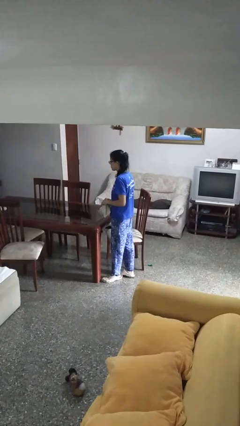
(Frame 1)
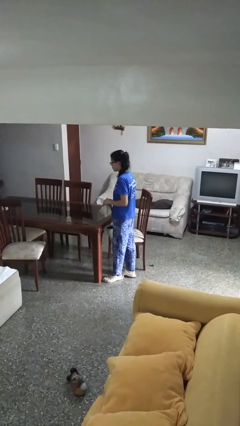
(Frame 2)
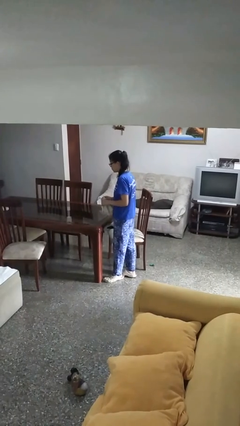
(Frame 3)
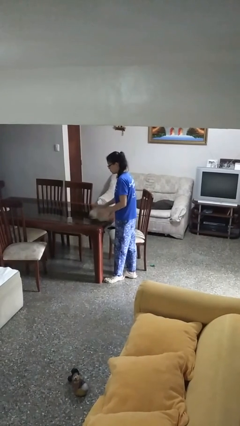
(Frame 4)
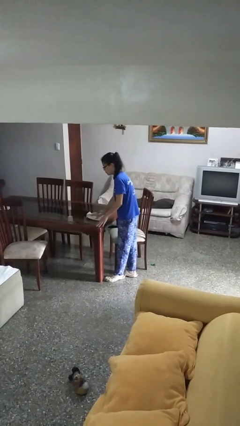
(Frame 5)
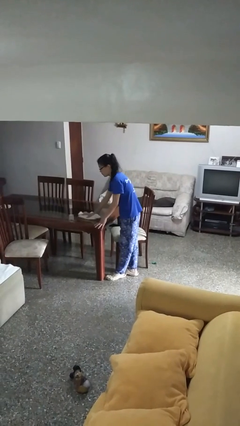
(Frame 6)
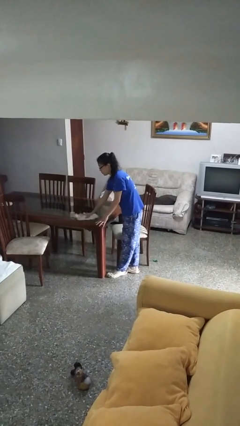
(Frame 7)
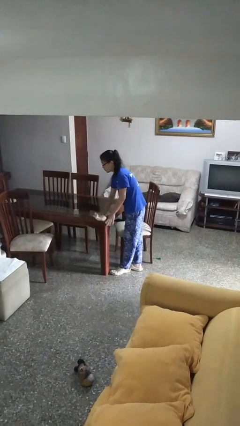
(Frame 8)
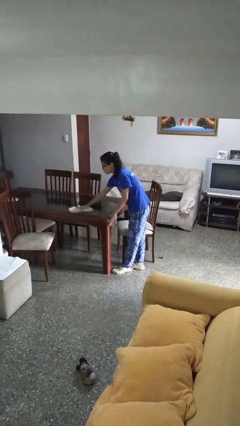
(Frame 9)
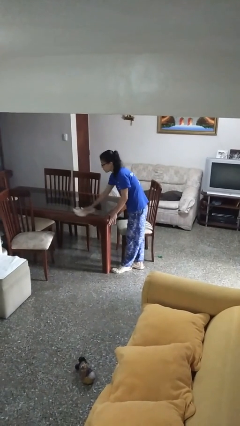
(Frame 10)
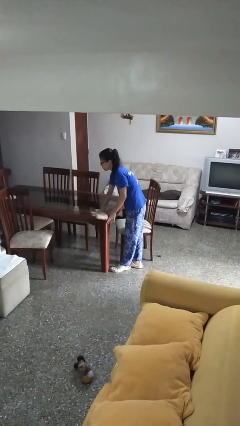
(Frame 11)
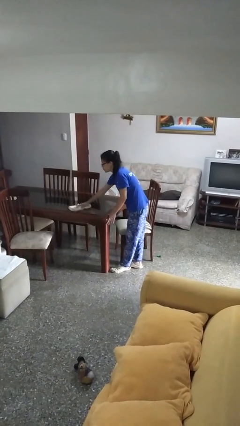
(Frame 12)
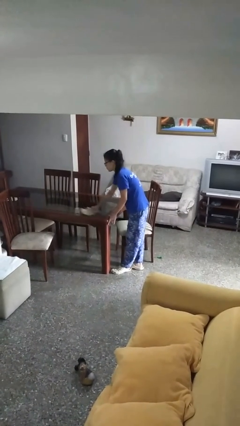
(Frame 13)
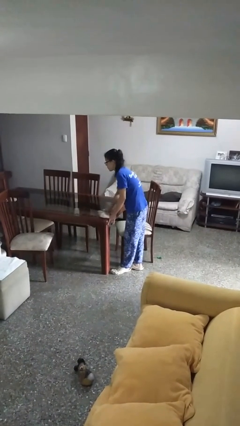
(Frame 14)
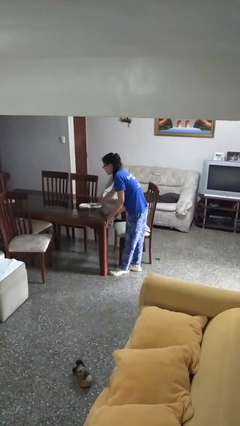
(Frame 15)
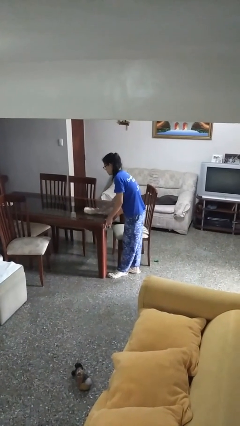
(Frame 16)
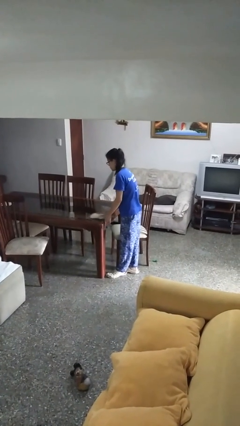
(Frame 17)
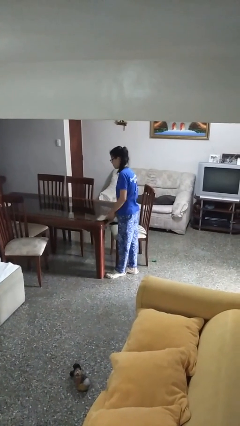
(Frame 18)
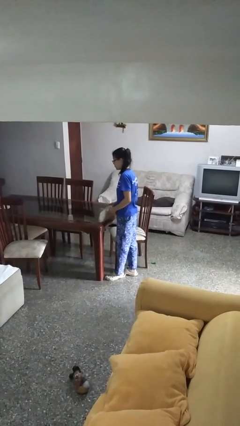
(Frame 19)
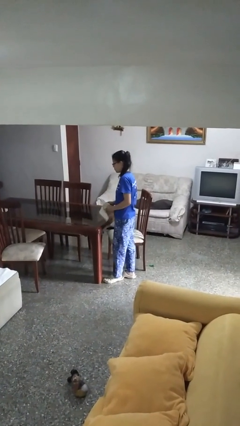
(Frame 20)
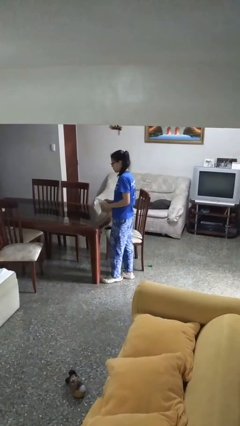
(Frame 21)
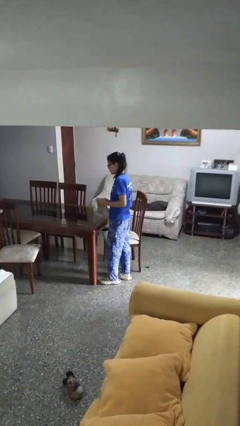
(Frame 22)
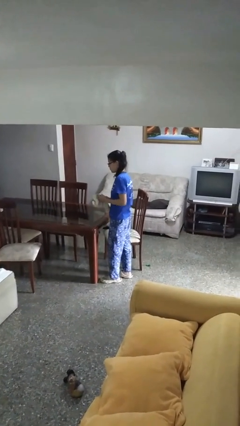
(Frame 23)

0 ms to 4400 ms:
person cleans table with rag

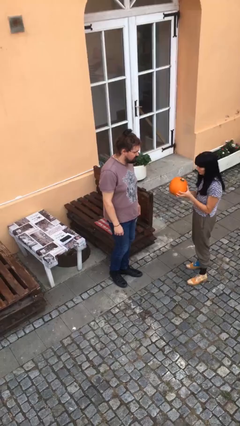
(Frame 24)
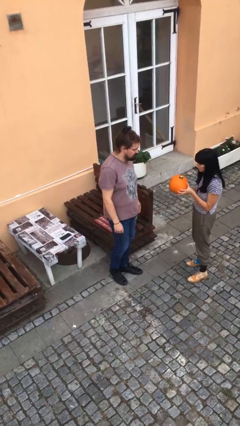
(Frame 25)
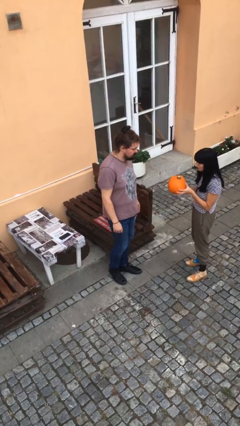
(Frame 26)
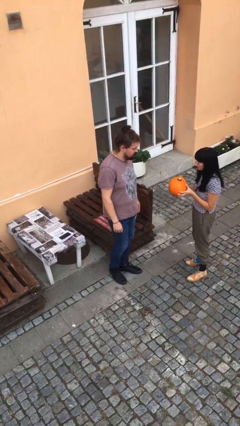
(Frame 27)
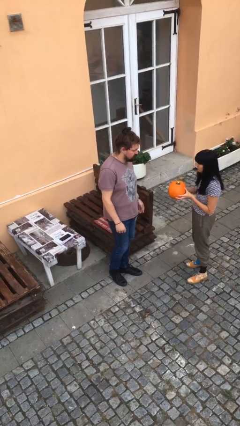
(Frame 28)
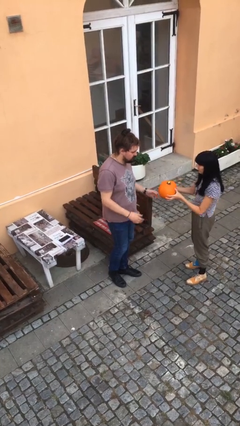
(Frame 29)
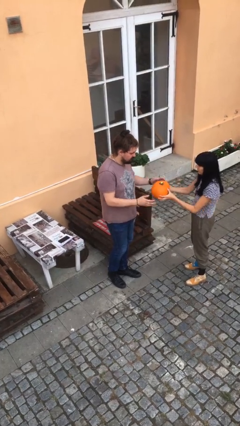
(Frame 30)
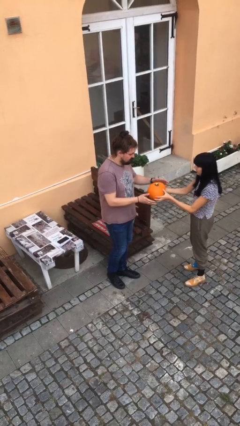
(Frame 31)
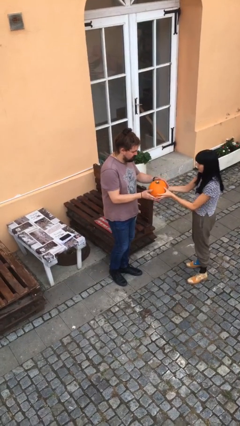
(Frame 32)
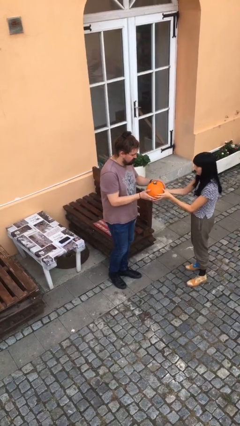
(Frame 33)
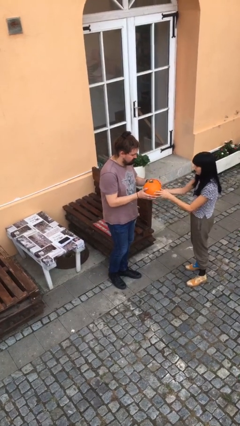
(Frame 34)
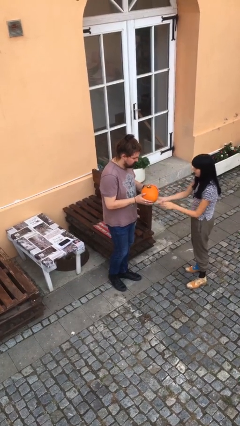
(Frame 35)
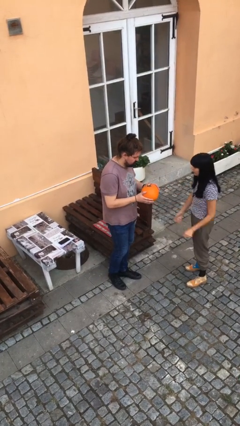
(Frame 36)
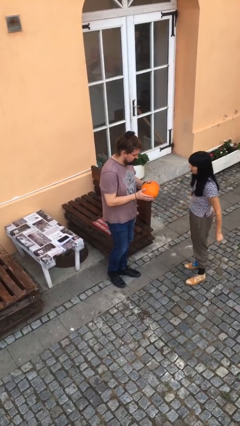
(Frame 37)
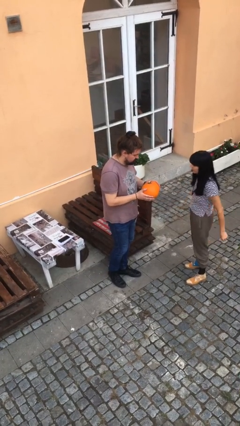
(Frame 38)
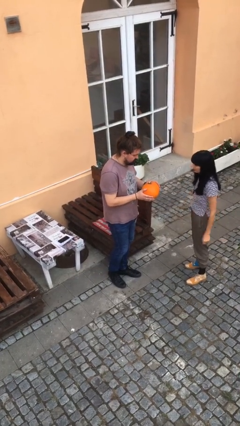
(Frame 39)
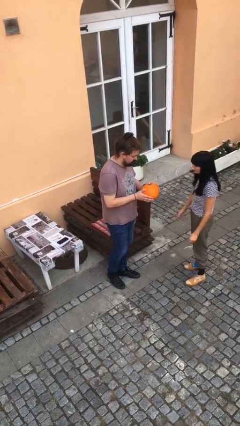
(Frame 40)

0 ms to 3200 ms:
person transfers object to person

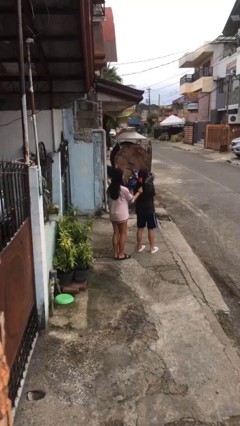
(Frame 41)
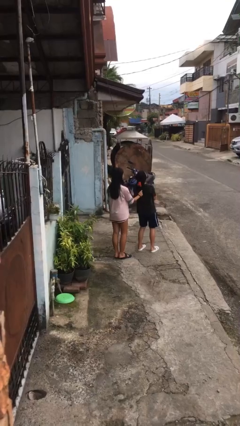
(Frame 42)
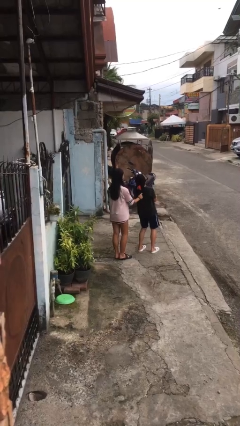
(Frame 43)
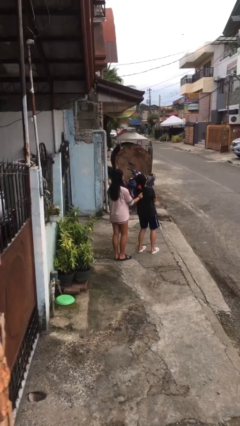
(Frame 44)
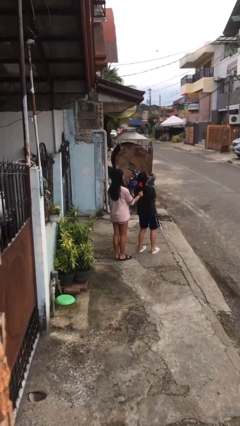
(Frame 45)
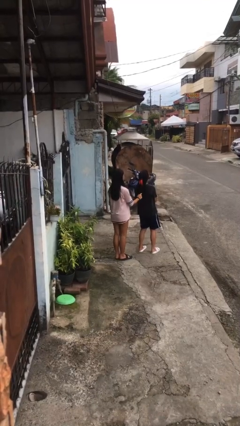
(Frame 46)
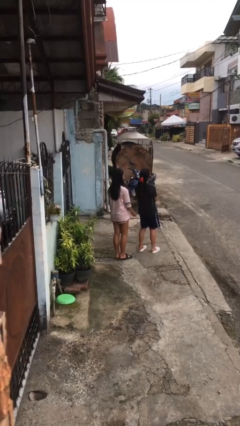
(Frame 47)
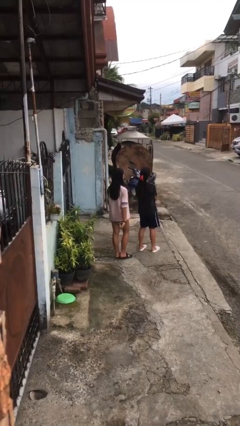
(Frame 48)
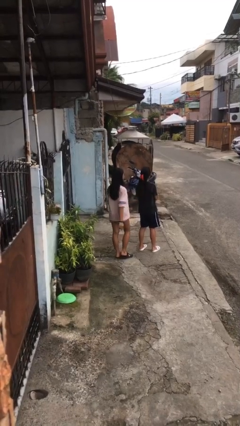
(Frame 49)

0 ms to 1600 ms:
person grabs person by hair

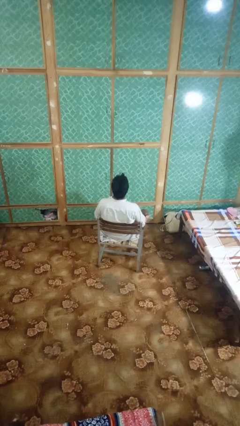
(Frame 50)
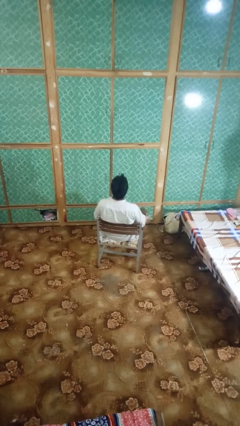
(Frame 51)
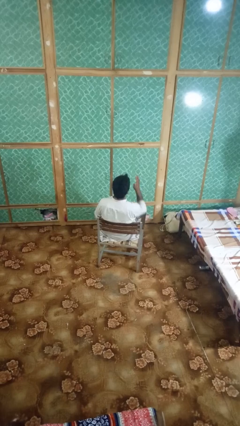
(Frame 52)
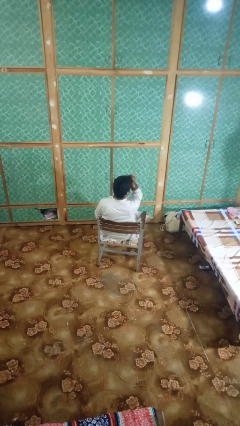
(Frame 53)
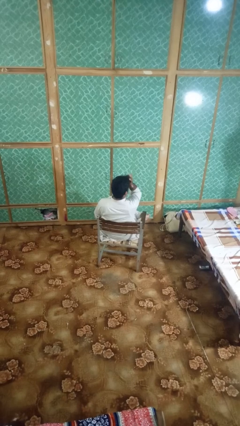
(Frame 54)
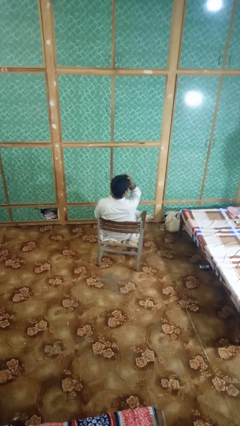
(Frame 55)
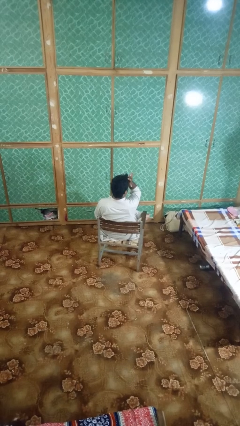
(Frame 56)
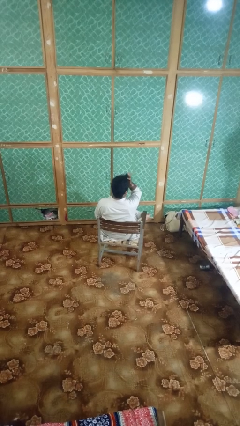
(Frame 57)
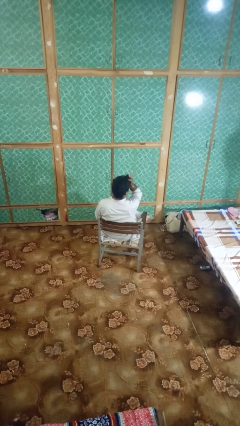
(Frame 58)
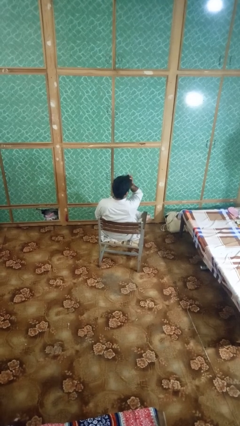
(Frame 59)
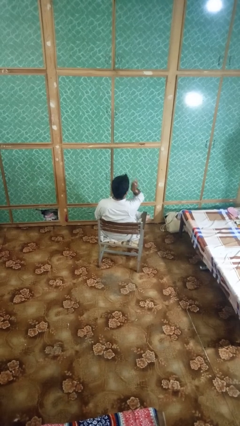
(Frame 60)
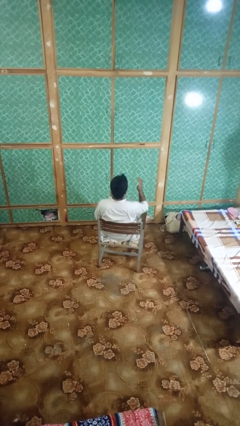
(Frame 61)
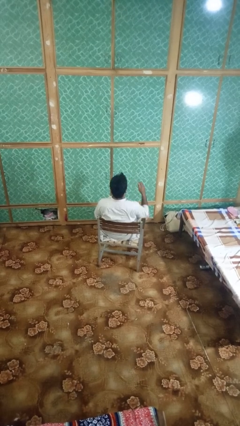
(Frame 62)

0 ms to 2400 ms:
person rubs eyes

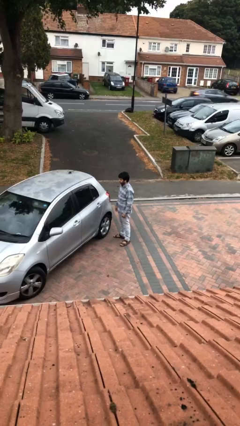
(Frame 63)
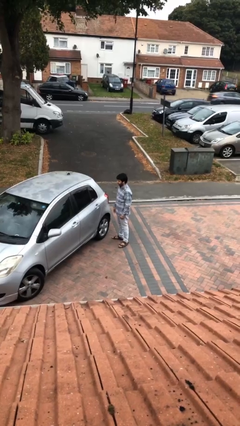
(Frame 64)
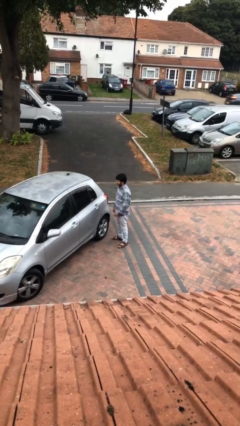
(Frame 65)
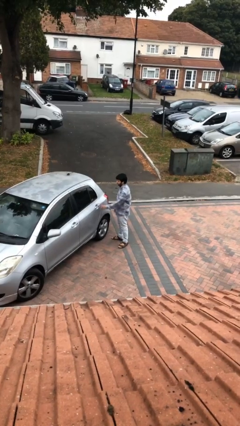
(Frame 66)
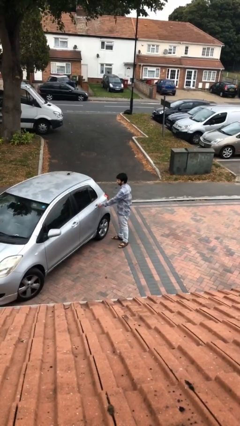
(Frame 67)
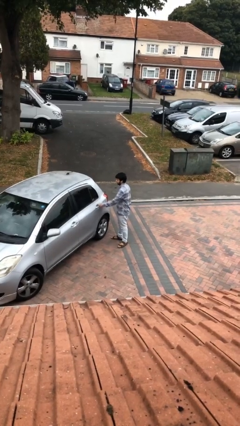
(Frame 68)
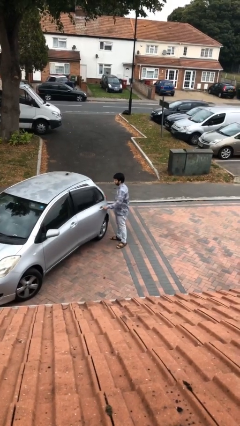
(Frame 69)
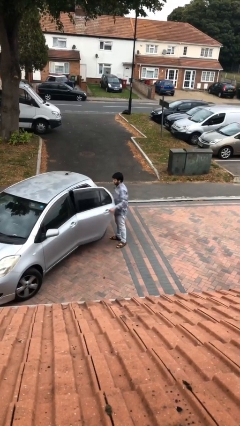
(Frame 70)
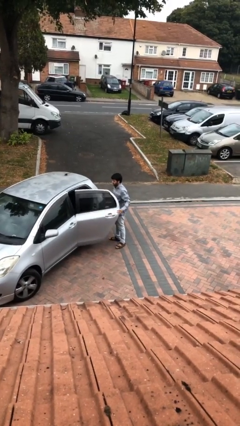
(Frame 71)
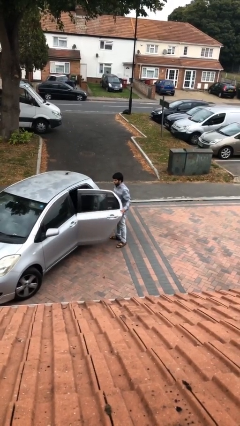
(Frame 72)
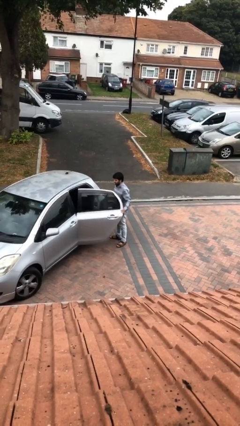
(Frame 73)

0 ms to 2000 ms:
person opens car door

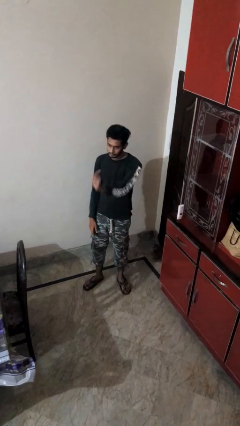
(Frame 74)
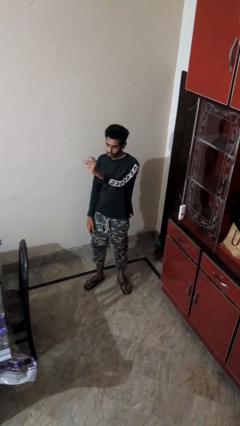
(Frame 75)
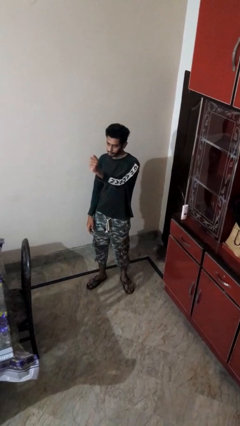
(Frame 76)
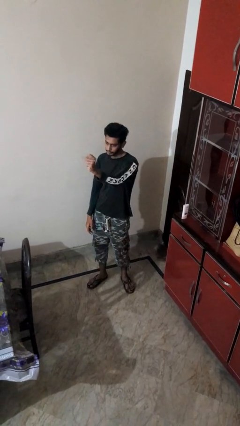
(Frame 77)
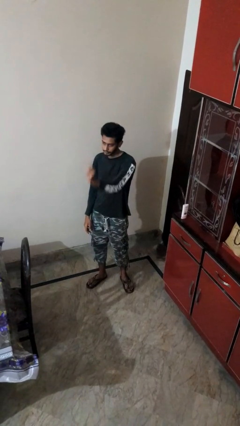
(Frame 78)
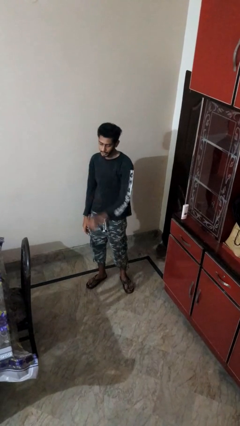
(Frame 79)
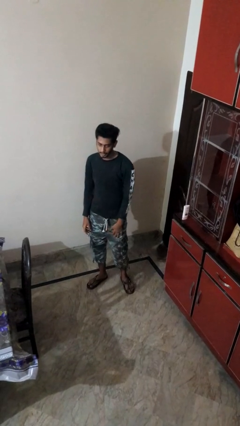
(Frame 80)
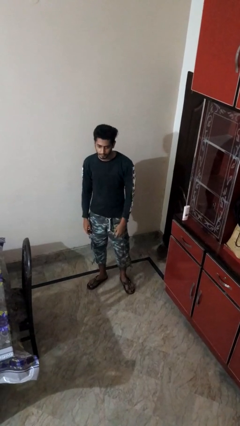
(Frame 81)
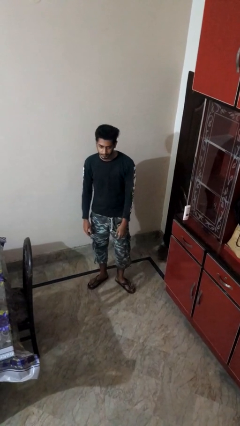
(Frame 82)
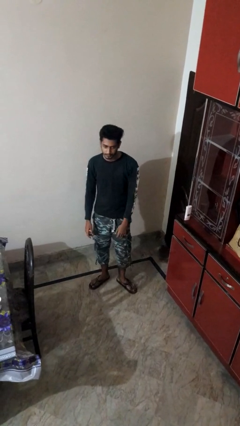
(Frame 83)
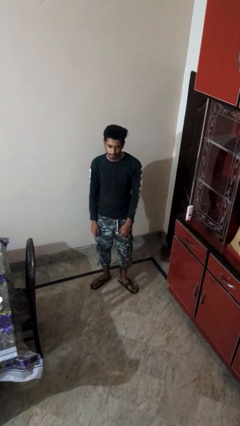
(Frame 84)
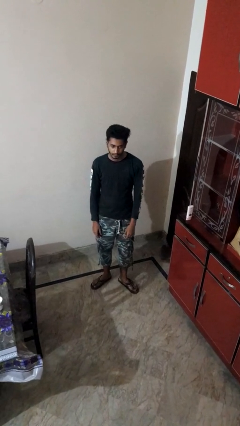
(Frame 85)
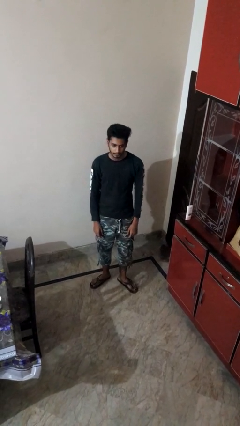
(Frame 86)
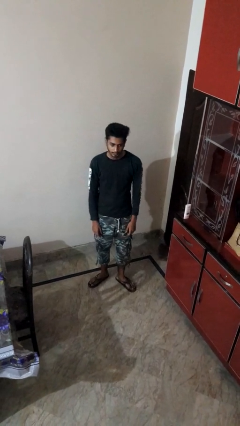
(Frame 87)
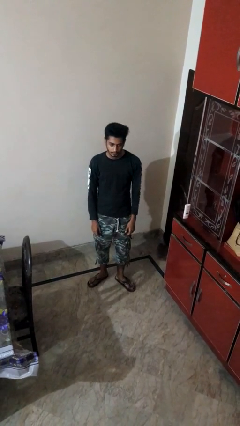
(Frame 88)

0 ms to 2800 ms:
person snaps fingers

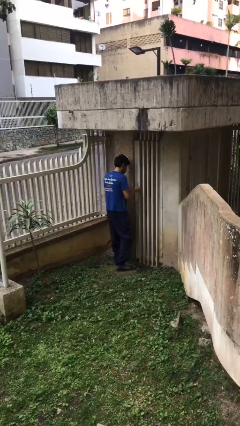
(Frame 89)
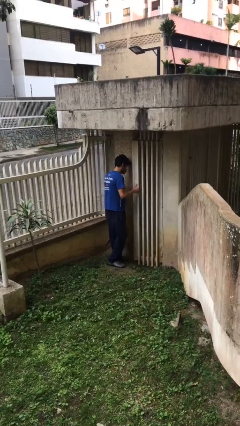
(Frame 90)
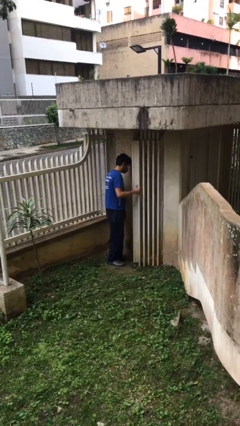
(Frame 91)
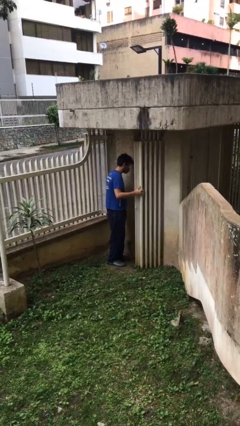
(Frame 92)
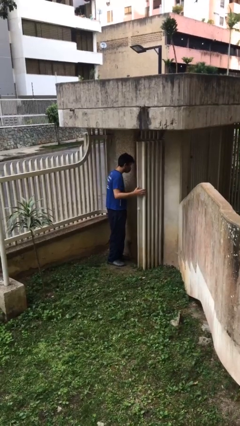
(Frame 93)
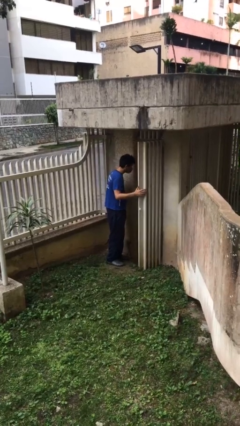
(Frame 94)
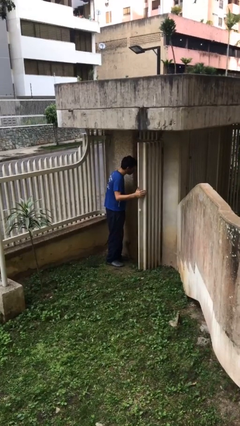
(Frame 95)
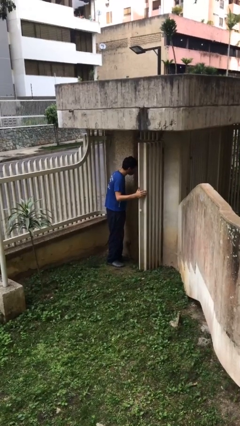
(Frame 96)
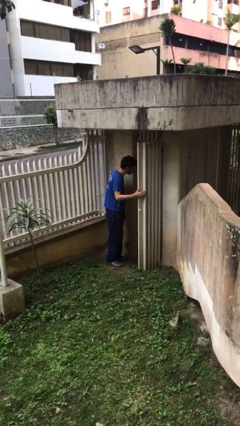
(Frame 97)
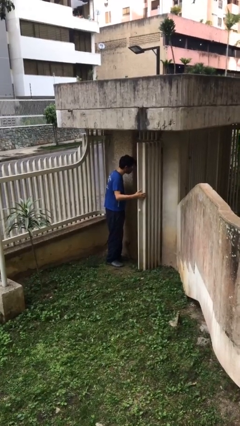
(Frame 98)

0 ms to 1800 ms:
person opens facility door
